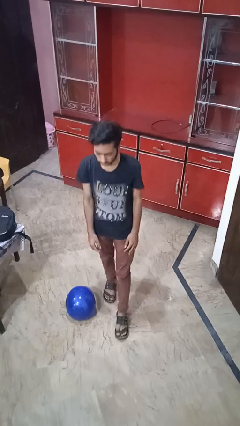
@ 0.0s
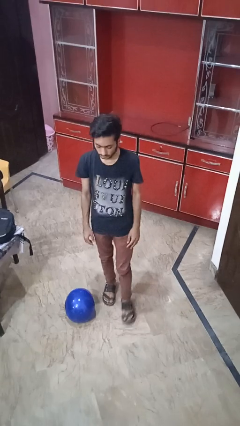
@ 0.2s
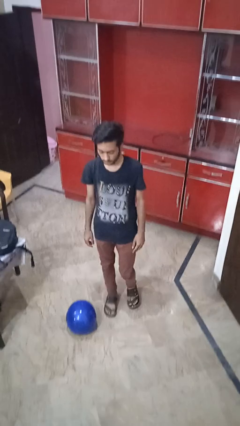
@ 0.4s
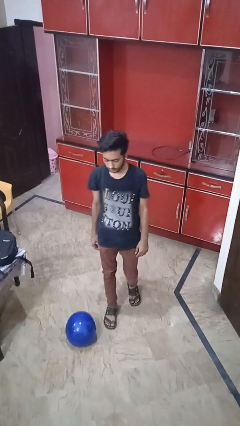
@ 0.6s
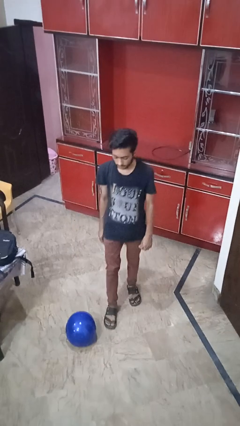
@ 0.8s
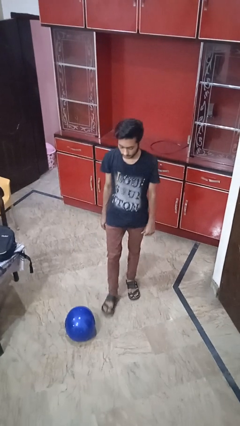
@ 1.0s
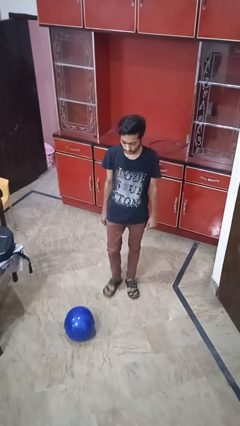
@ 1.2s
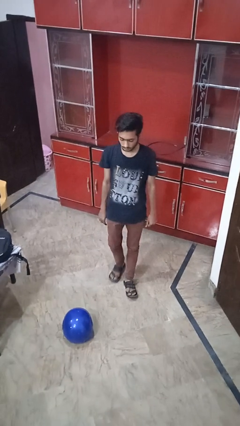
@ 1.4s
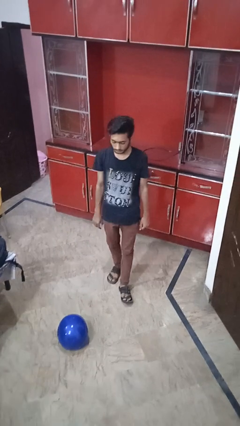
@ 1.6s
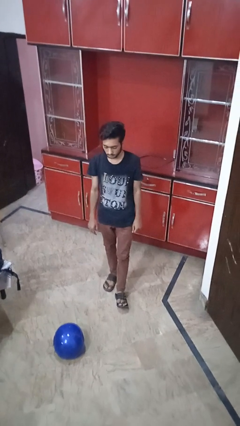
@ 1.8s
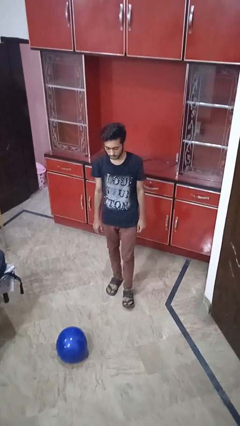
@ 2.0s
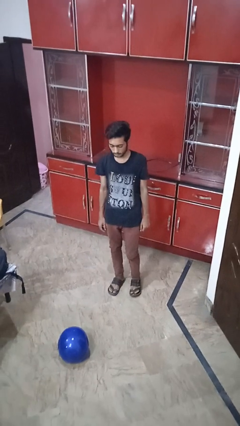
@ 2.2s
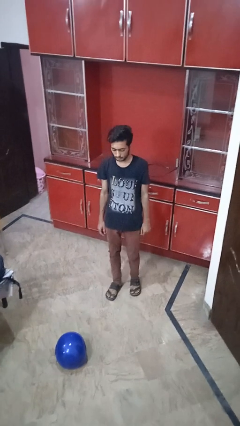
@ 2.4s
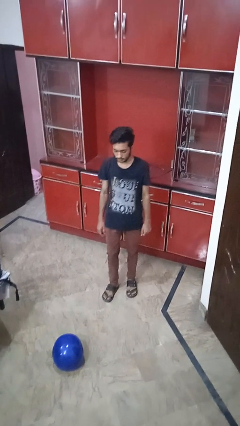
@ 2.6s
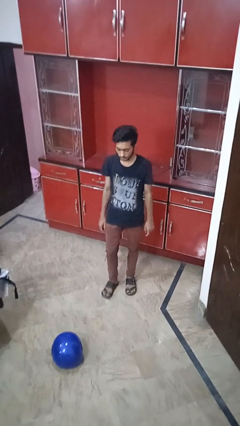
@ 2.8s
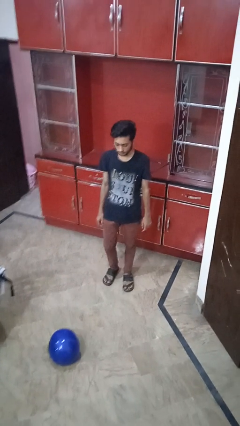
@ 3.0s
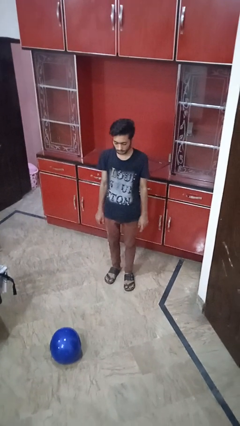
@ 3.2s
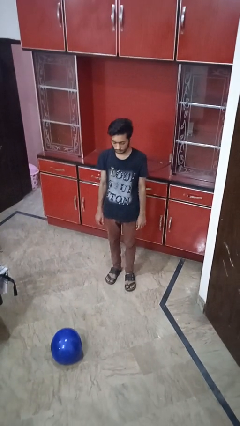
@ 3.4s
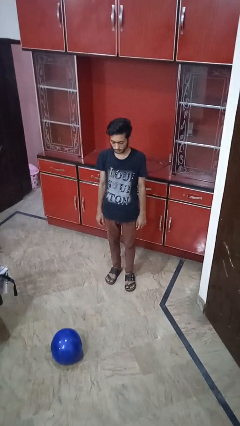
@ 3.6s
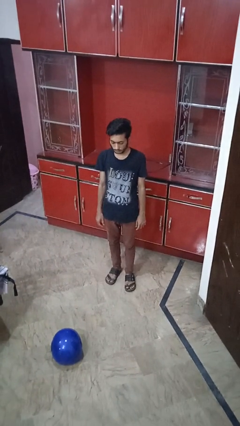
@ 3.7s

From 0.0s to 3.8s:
person takes phone from pocket

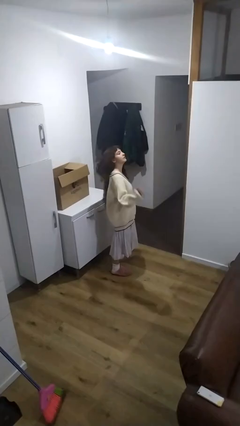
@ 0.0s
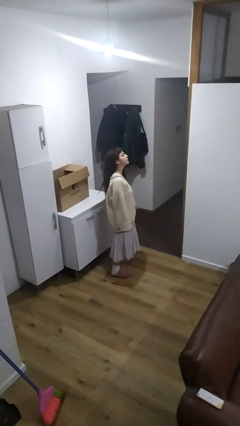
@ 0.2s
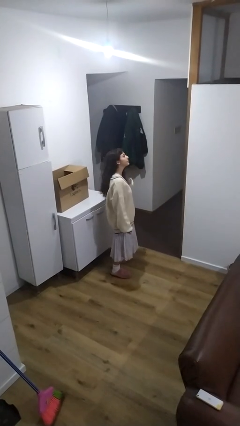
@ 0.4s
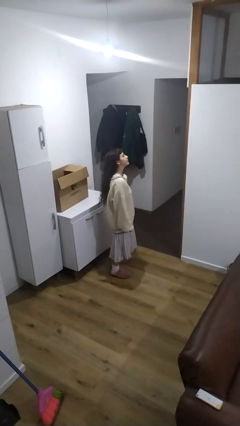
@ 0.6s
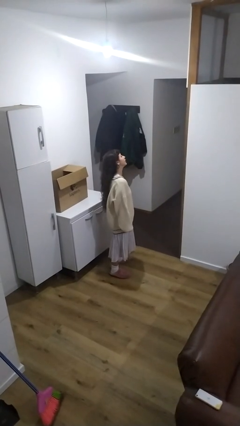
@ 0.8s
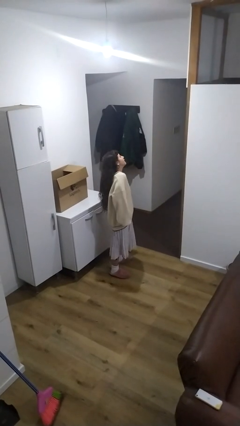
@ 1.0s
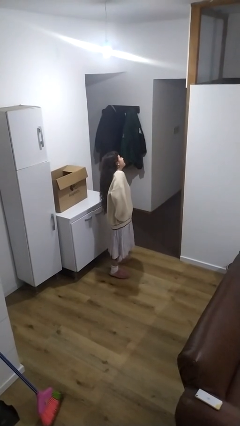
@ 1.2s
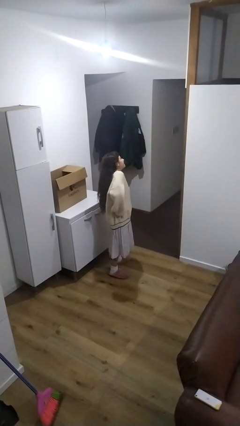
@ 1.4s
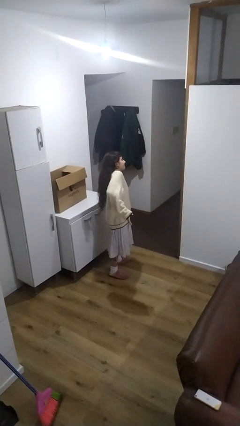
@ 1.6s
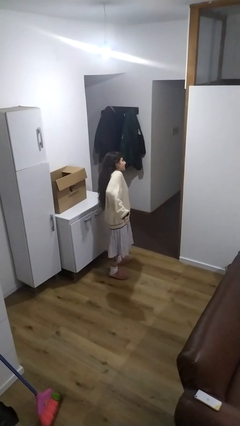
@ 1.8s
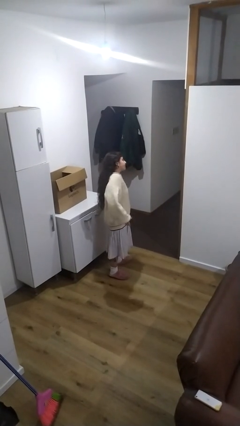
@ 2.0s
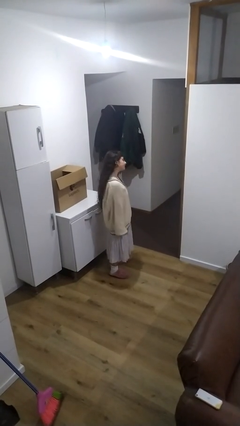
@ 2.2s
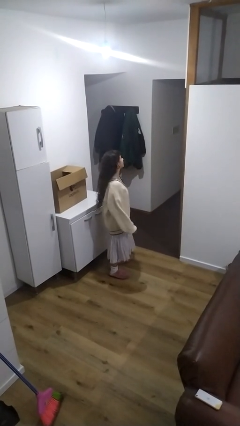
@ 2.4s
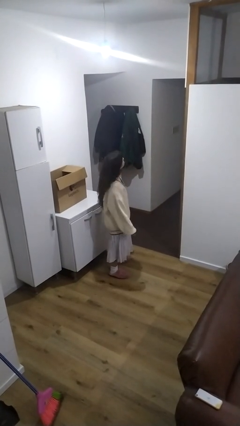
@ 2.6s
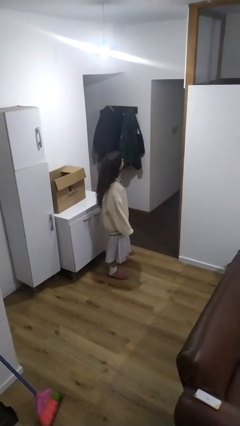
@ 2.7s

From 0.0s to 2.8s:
person shrugs

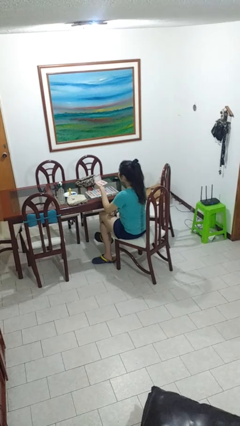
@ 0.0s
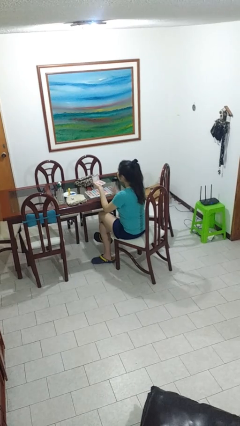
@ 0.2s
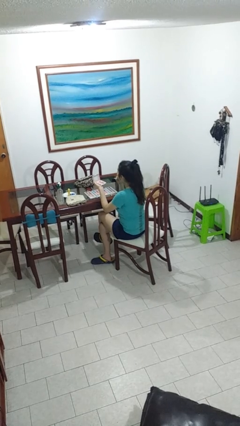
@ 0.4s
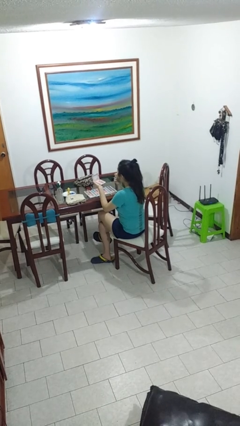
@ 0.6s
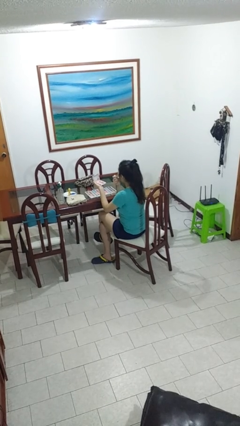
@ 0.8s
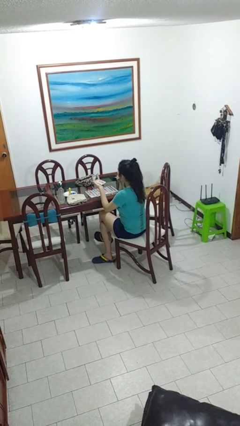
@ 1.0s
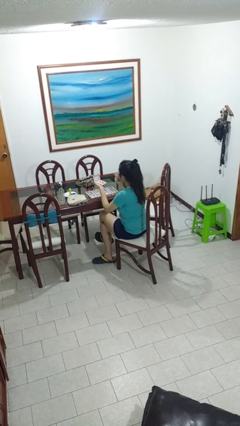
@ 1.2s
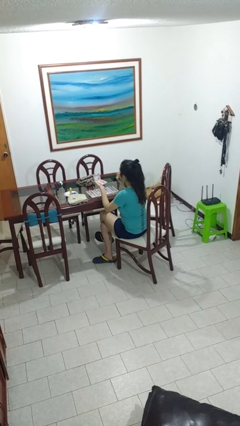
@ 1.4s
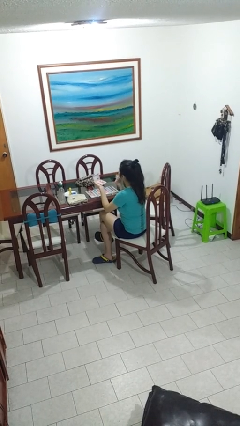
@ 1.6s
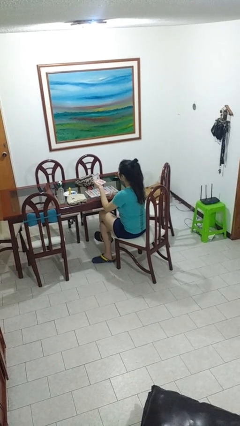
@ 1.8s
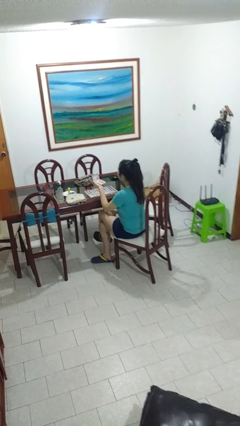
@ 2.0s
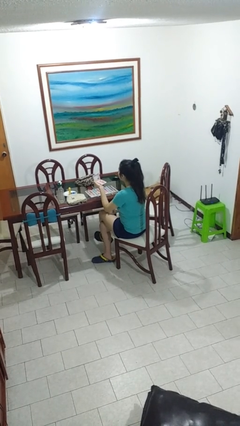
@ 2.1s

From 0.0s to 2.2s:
person applies lip makeup

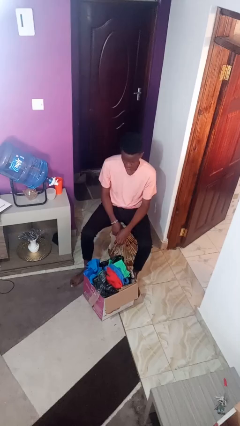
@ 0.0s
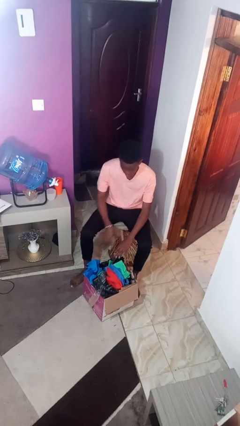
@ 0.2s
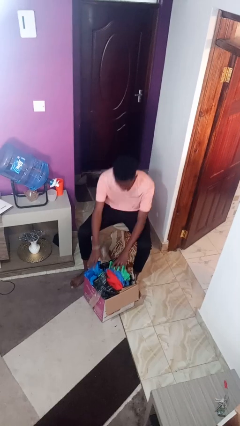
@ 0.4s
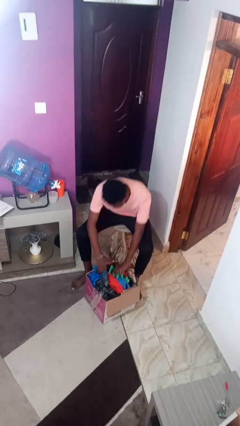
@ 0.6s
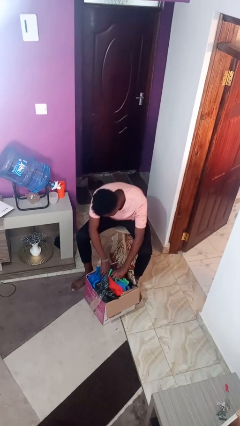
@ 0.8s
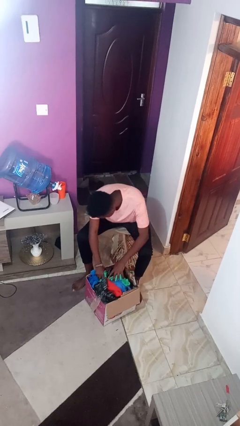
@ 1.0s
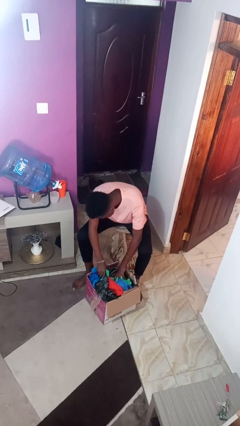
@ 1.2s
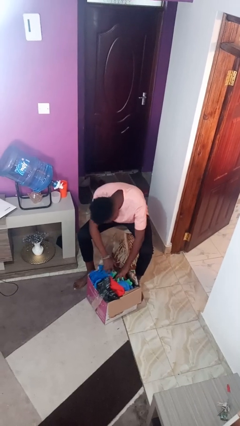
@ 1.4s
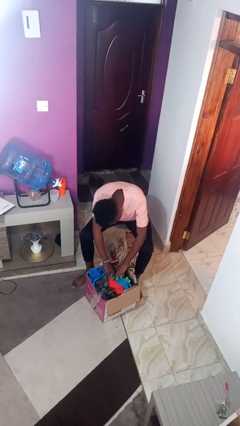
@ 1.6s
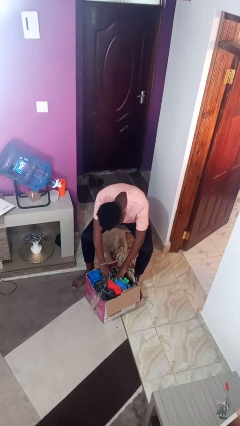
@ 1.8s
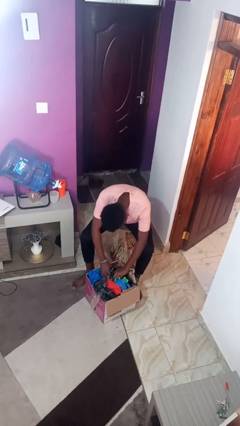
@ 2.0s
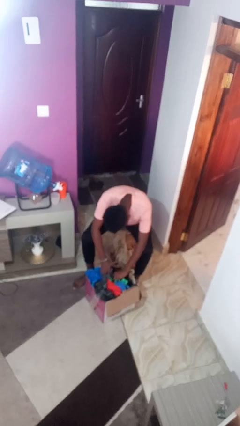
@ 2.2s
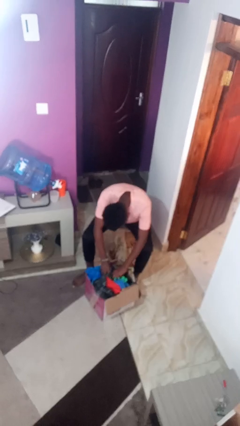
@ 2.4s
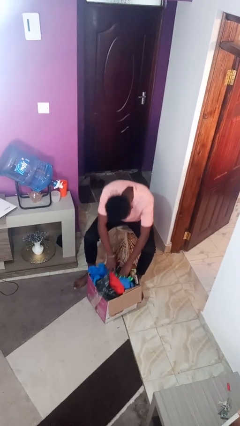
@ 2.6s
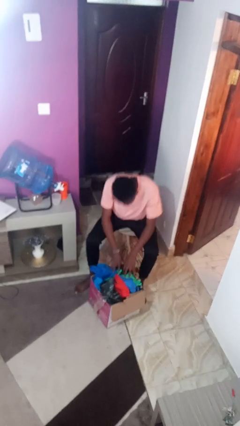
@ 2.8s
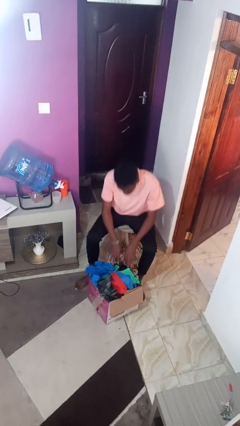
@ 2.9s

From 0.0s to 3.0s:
person searches in box

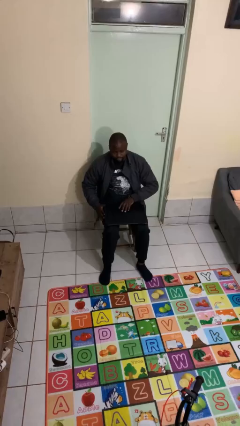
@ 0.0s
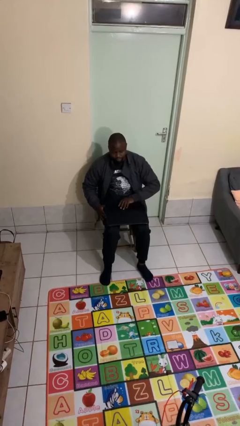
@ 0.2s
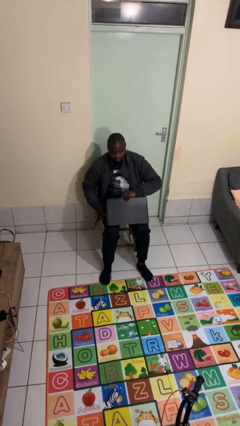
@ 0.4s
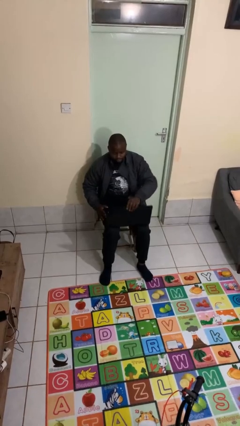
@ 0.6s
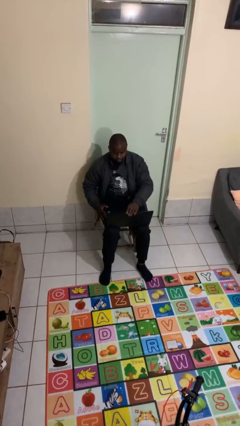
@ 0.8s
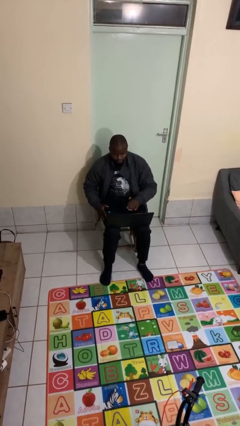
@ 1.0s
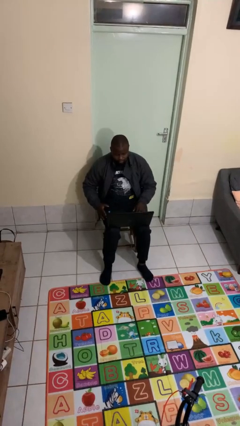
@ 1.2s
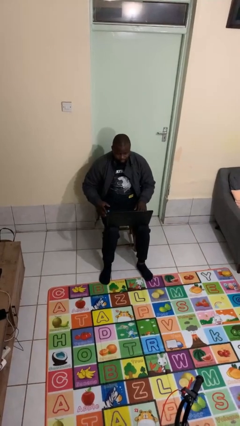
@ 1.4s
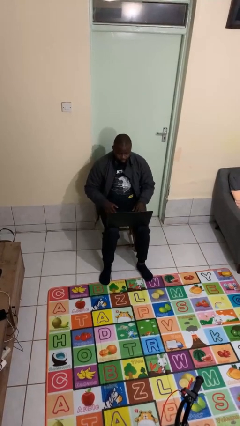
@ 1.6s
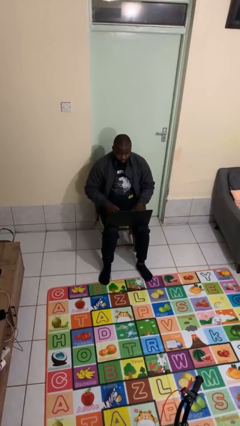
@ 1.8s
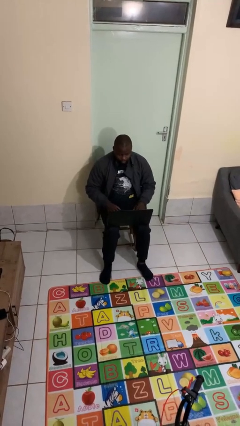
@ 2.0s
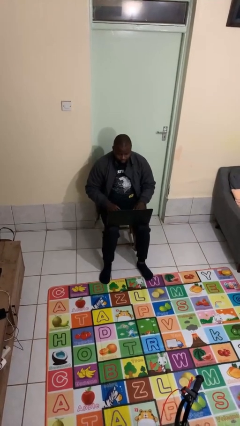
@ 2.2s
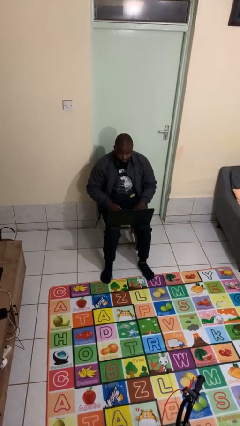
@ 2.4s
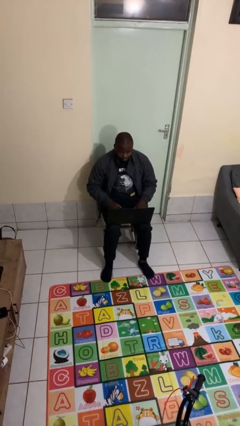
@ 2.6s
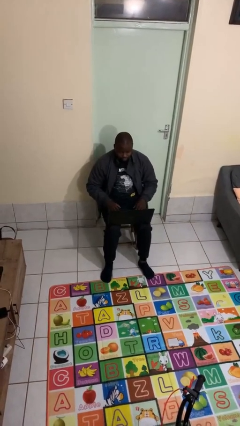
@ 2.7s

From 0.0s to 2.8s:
person opens laptop

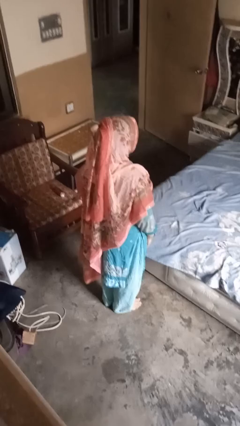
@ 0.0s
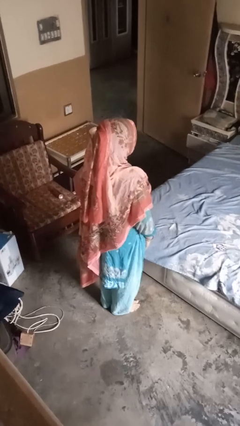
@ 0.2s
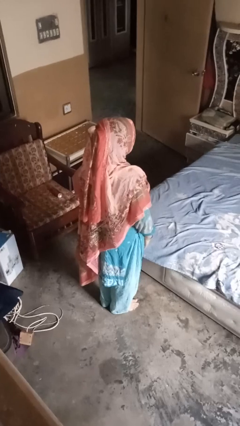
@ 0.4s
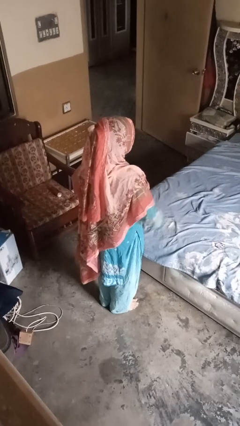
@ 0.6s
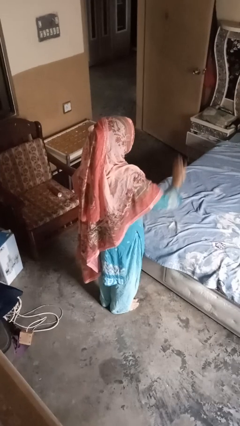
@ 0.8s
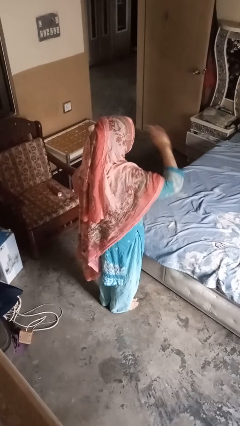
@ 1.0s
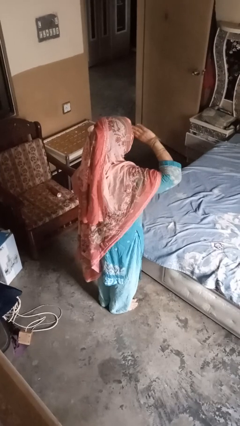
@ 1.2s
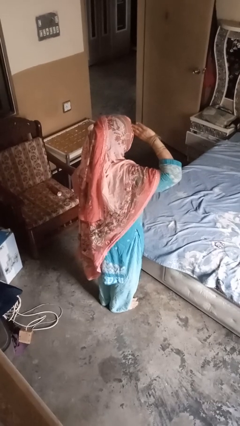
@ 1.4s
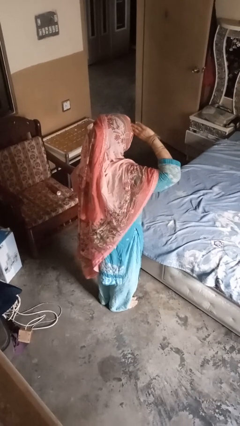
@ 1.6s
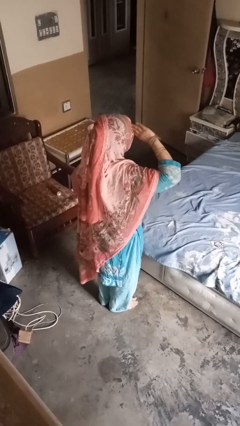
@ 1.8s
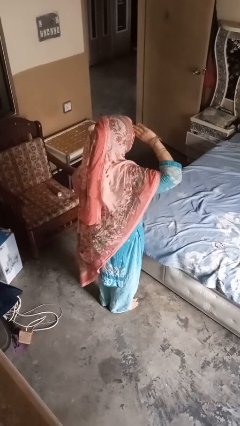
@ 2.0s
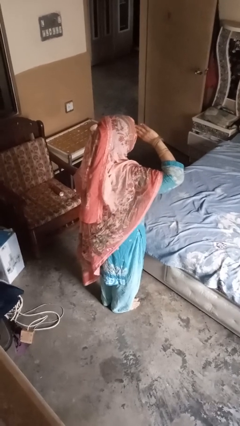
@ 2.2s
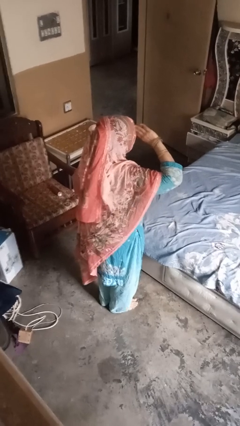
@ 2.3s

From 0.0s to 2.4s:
person salutes

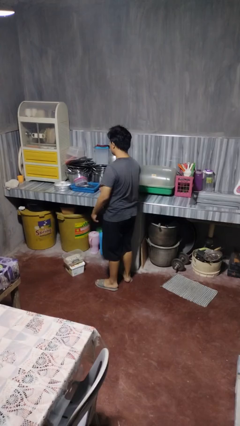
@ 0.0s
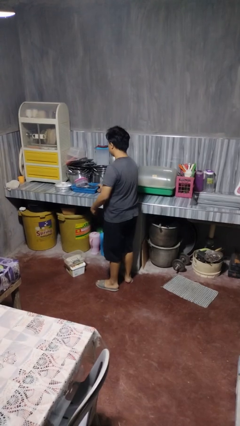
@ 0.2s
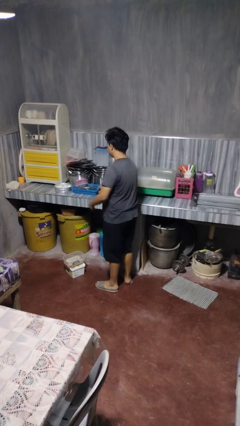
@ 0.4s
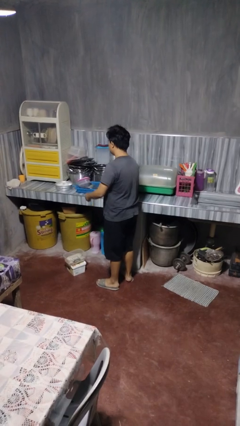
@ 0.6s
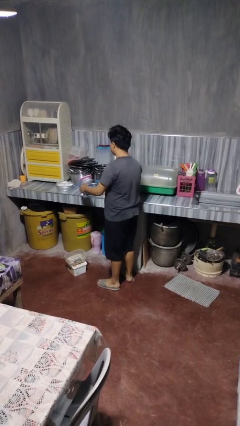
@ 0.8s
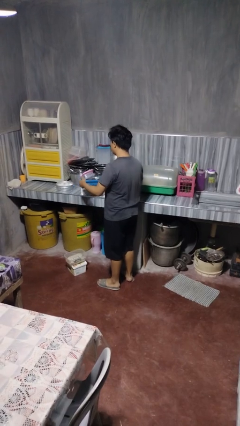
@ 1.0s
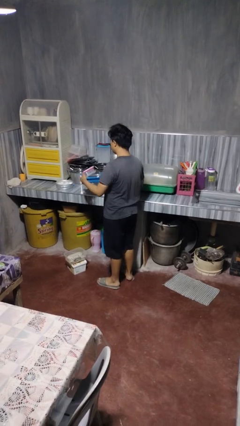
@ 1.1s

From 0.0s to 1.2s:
person picks up object from countertop
